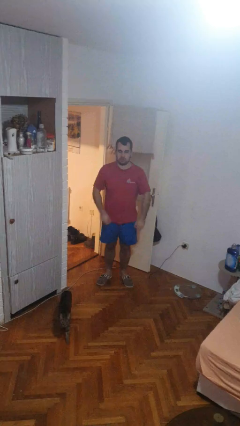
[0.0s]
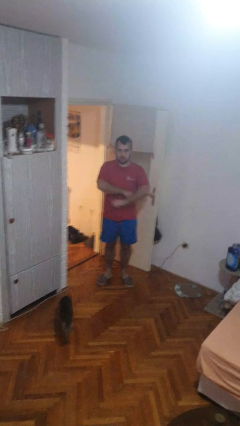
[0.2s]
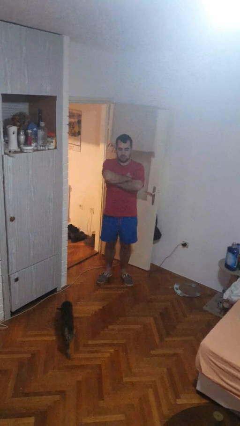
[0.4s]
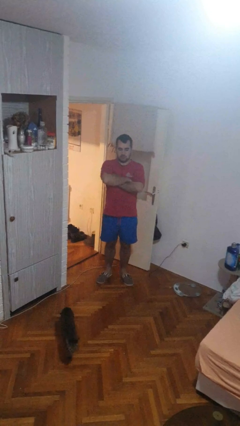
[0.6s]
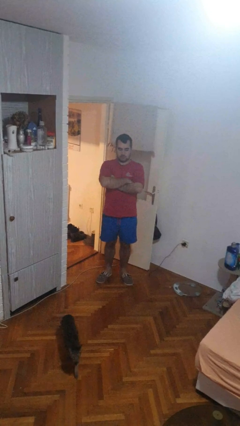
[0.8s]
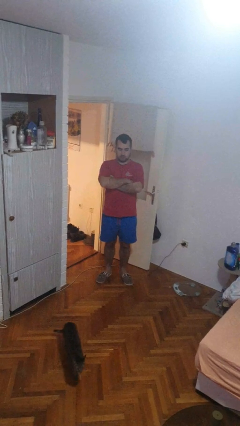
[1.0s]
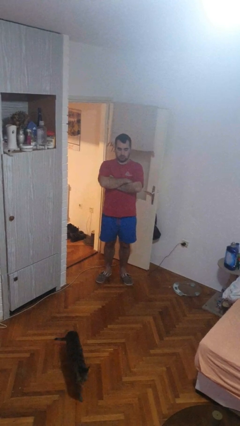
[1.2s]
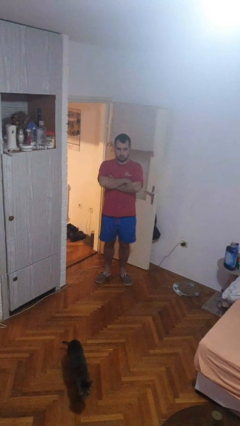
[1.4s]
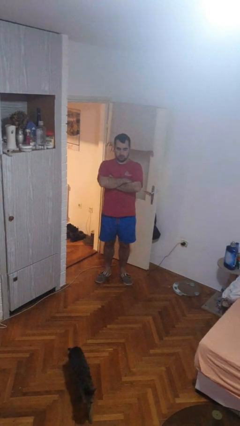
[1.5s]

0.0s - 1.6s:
person crosses arms

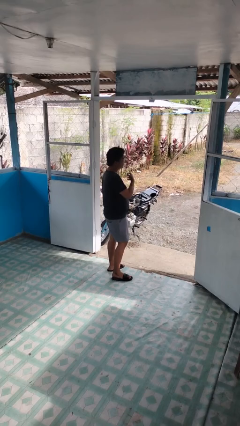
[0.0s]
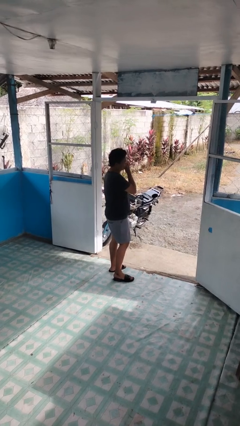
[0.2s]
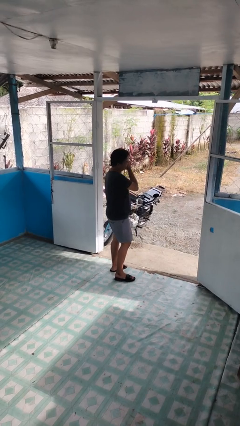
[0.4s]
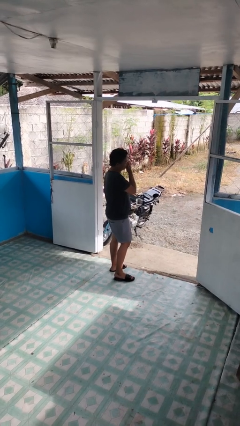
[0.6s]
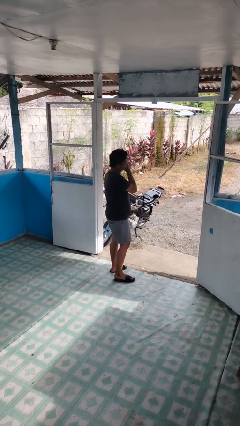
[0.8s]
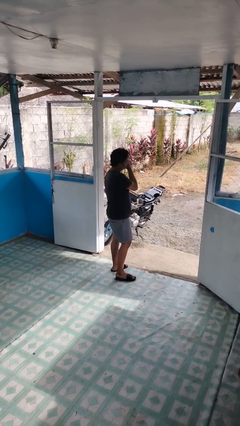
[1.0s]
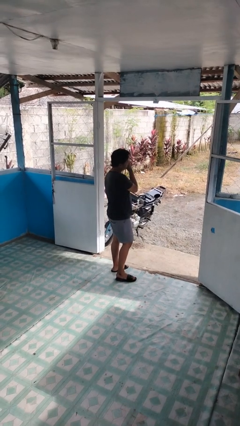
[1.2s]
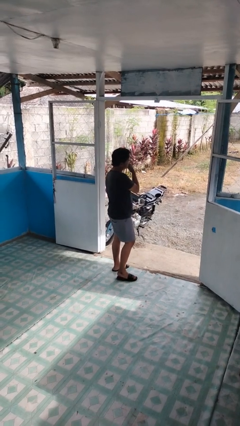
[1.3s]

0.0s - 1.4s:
person scratches face

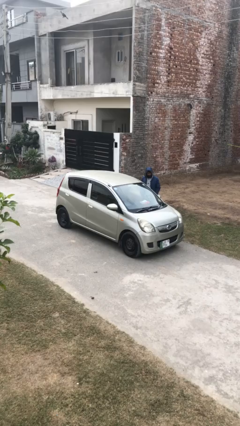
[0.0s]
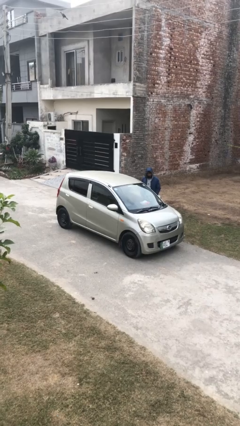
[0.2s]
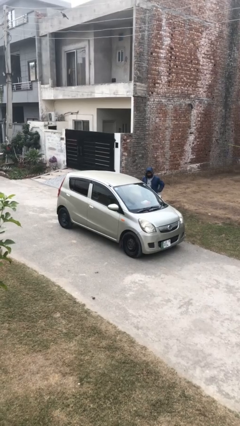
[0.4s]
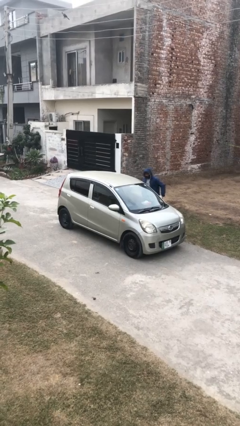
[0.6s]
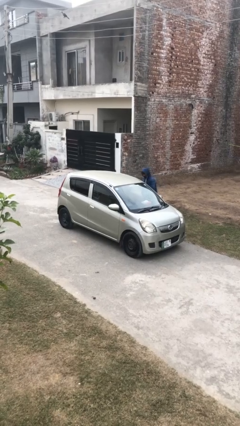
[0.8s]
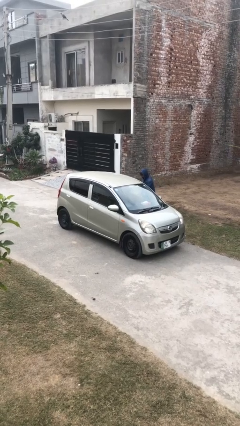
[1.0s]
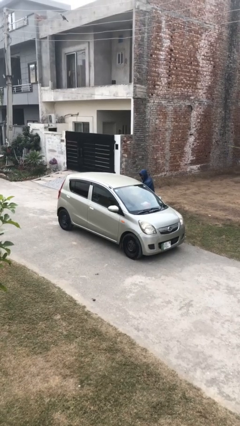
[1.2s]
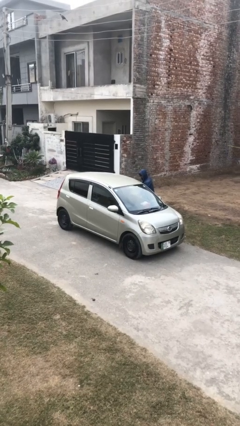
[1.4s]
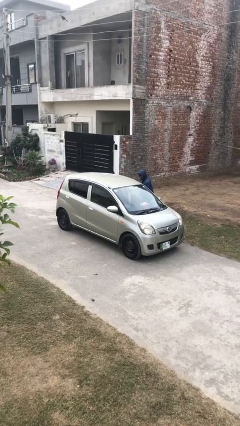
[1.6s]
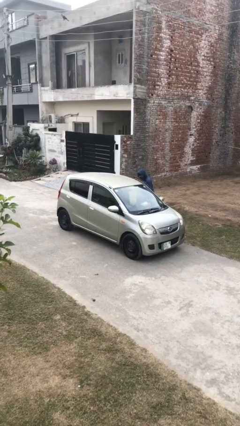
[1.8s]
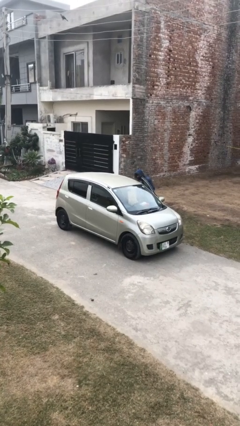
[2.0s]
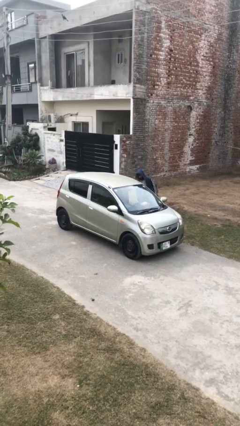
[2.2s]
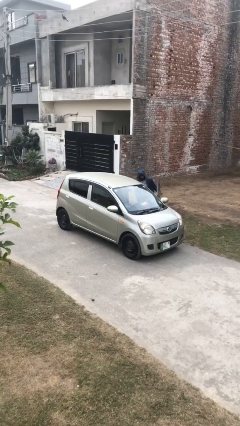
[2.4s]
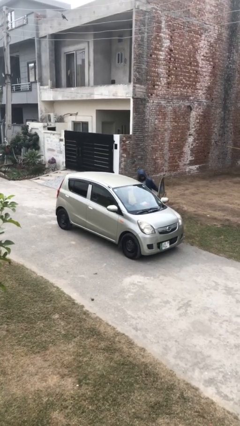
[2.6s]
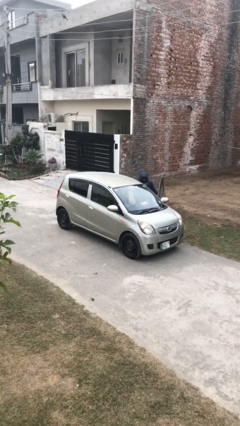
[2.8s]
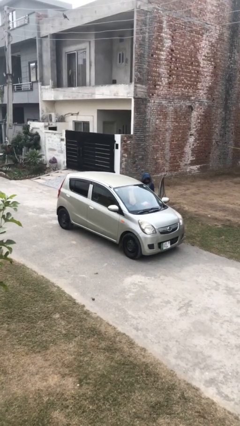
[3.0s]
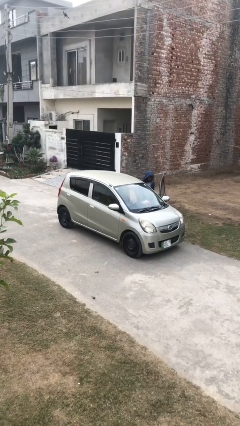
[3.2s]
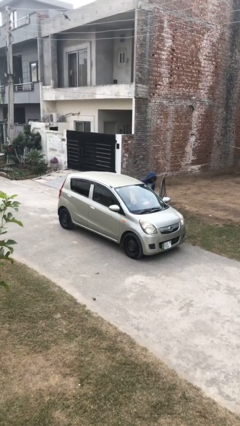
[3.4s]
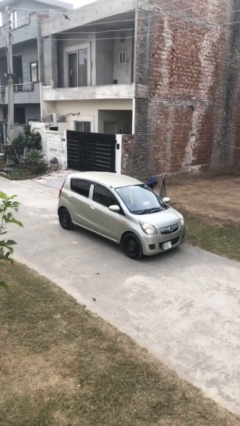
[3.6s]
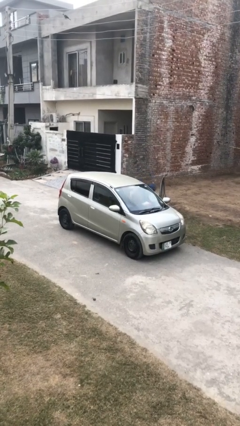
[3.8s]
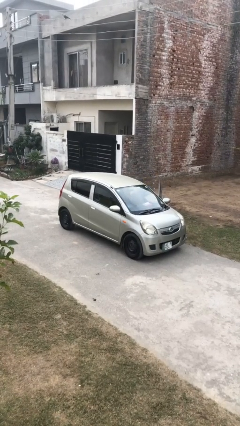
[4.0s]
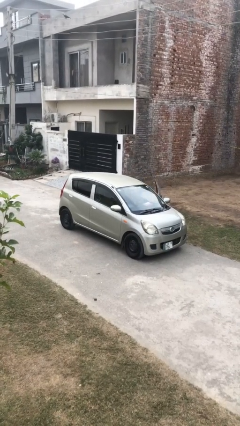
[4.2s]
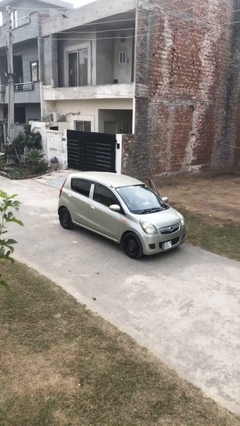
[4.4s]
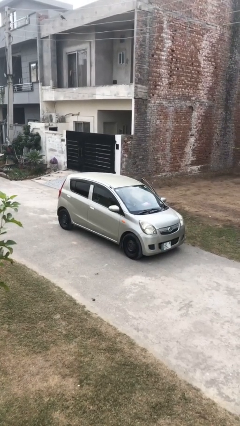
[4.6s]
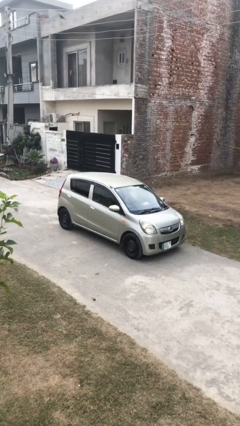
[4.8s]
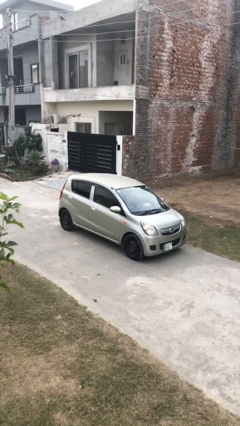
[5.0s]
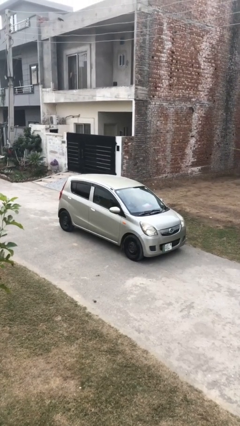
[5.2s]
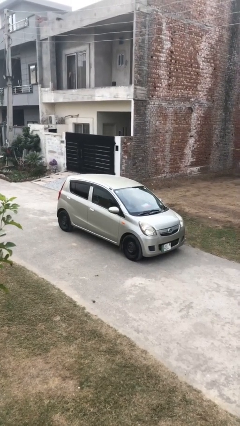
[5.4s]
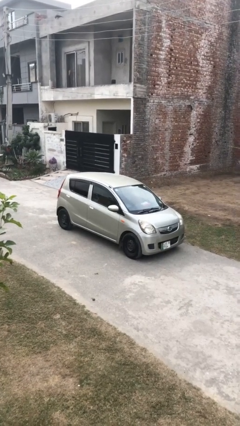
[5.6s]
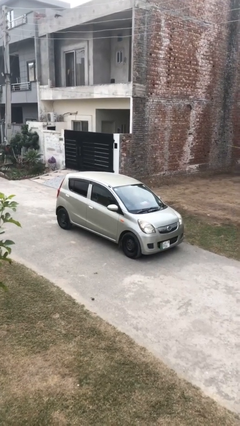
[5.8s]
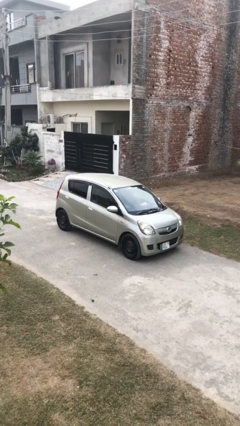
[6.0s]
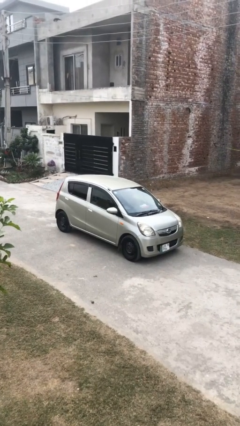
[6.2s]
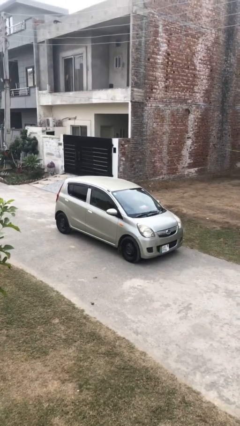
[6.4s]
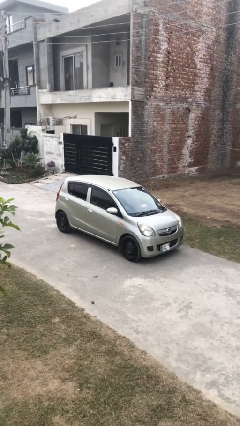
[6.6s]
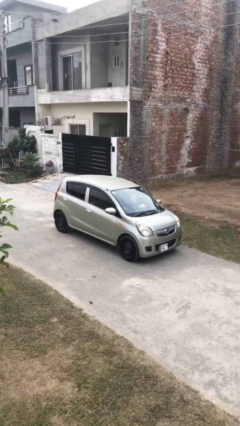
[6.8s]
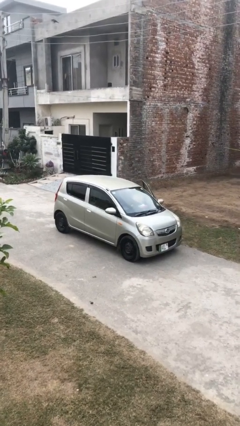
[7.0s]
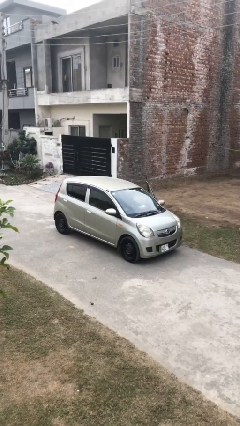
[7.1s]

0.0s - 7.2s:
car picks up person

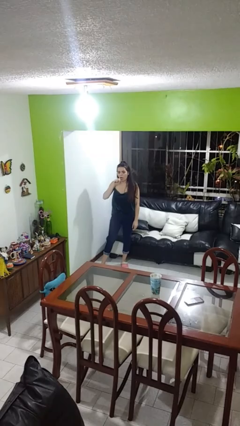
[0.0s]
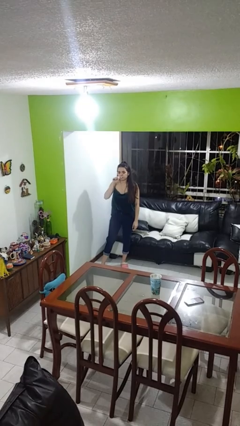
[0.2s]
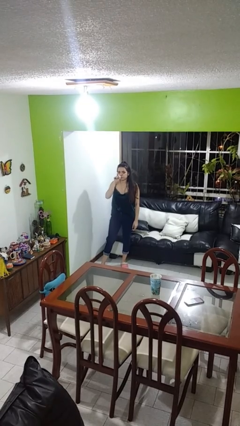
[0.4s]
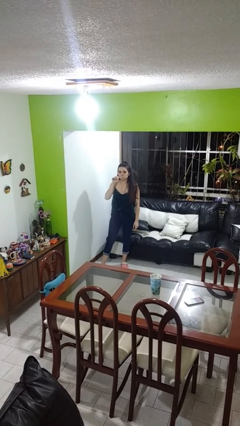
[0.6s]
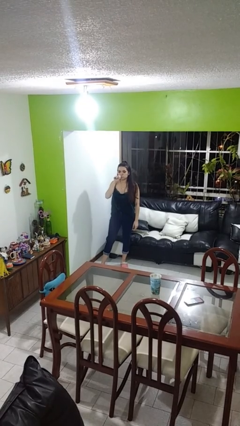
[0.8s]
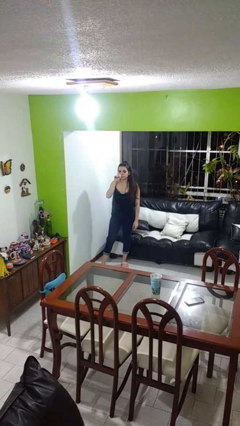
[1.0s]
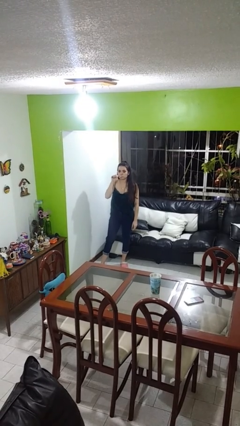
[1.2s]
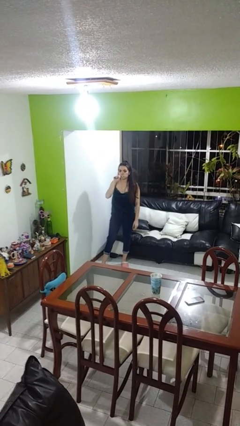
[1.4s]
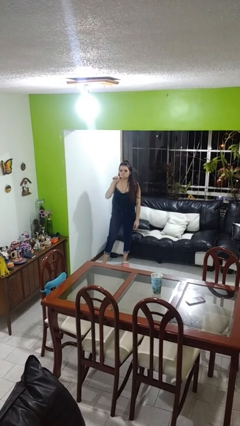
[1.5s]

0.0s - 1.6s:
person brushes teeth

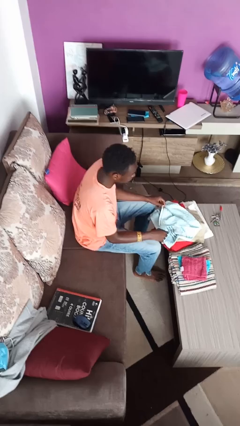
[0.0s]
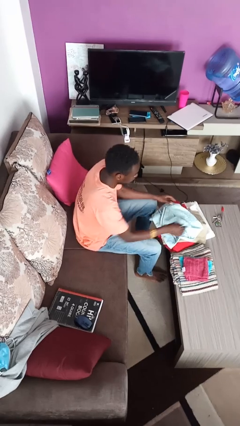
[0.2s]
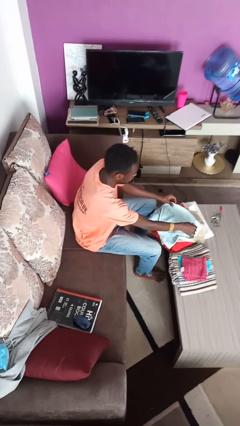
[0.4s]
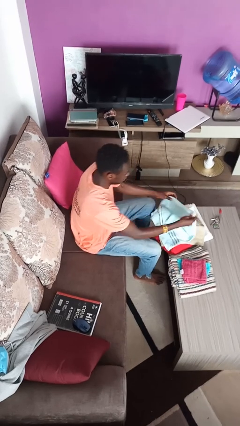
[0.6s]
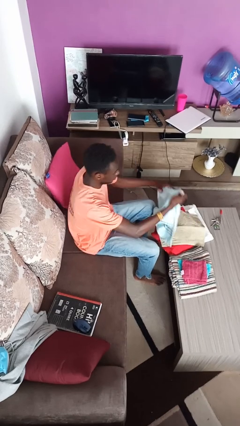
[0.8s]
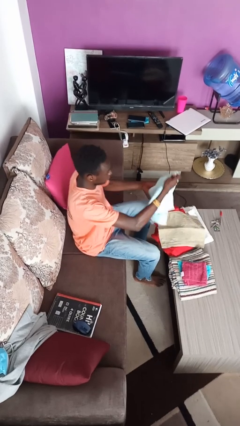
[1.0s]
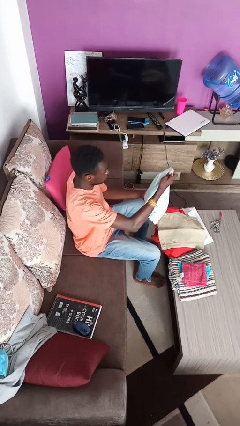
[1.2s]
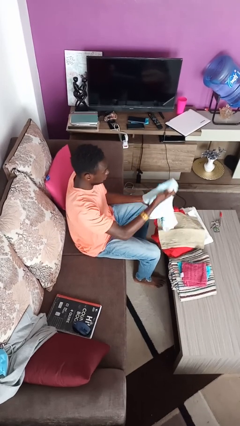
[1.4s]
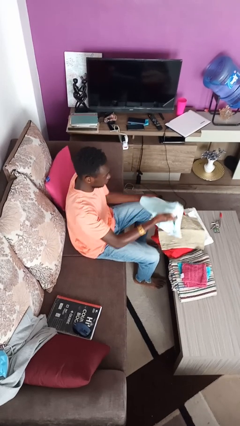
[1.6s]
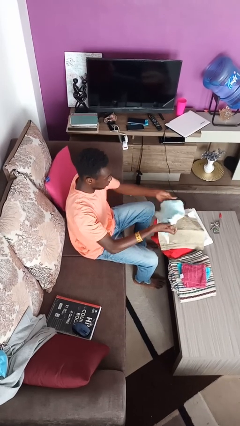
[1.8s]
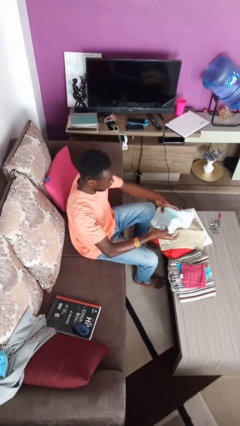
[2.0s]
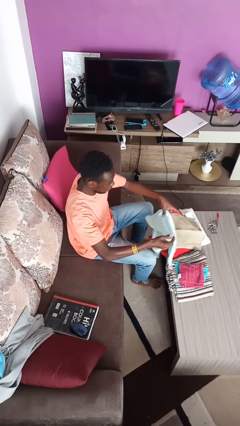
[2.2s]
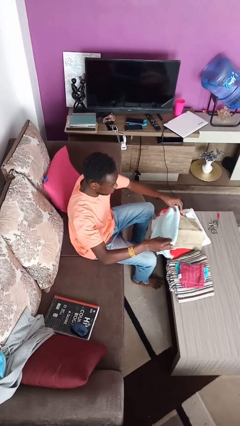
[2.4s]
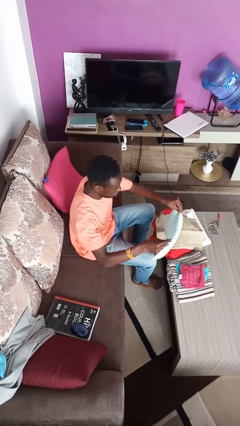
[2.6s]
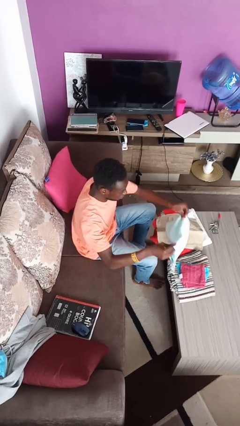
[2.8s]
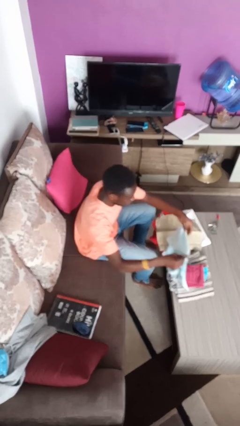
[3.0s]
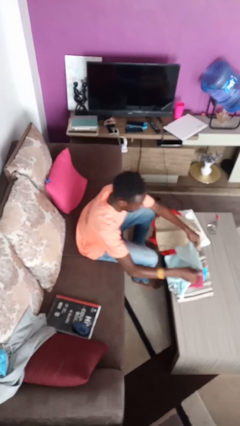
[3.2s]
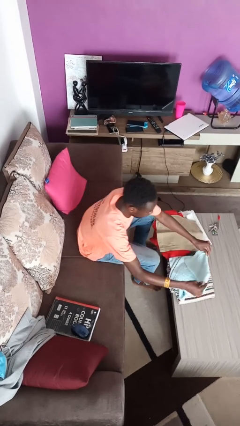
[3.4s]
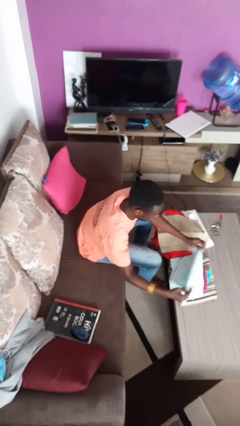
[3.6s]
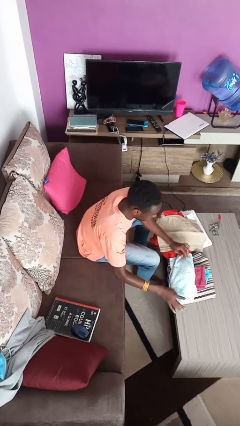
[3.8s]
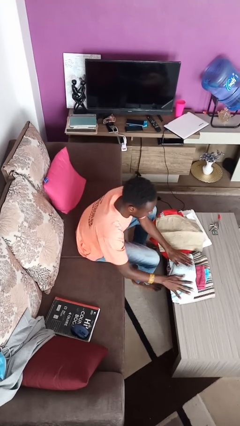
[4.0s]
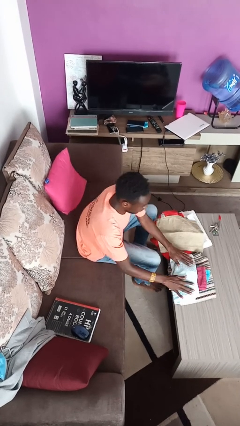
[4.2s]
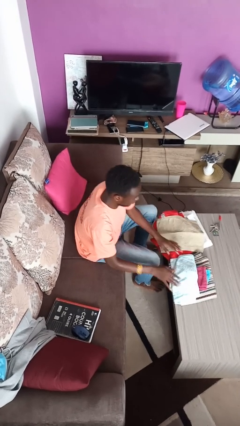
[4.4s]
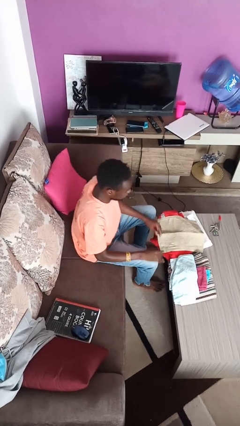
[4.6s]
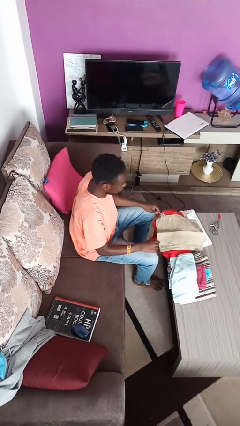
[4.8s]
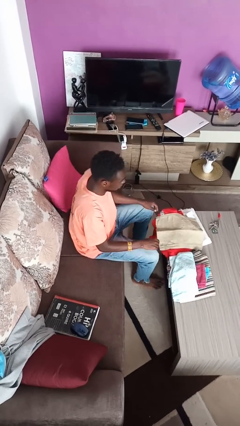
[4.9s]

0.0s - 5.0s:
person folds towel

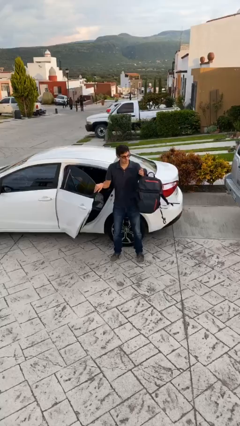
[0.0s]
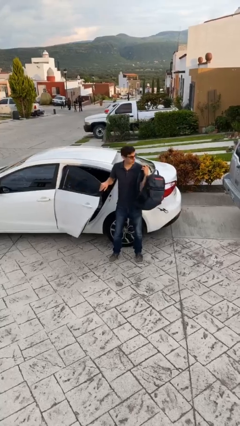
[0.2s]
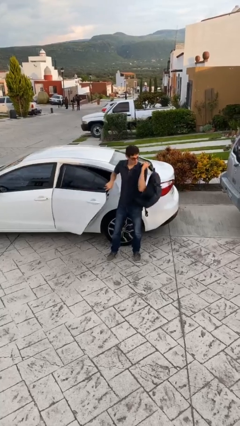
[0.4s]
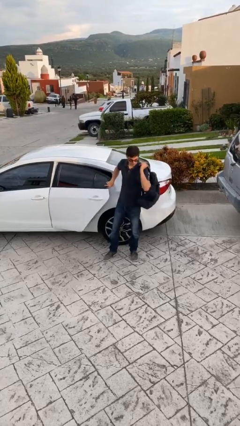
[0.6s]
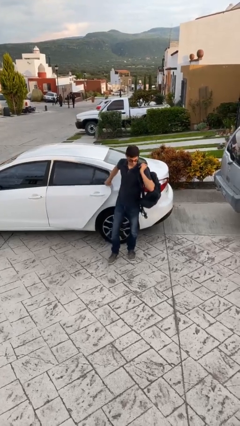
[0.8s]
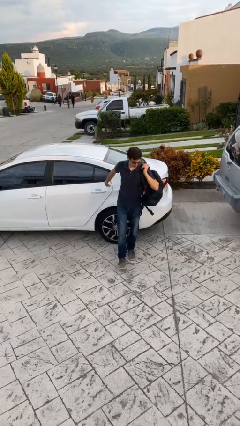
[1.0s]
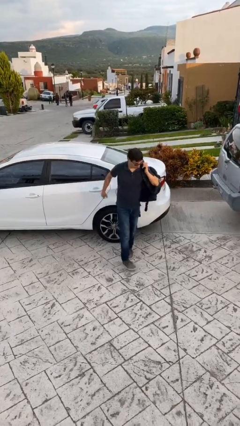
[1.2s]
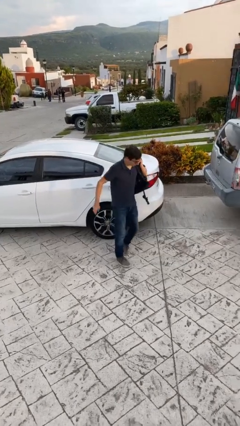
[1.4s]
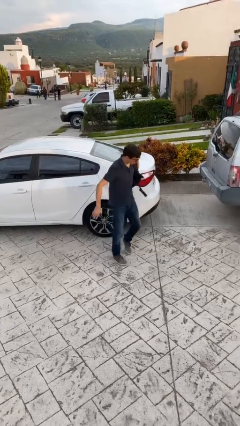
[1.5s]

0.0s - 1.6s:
person closes car door
